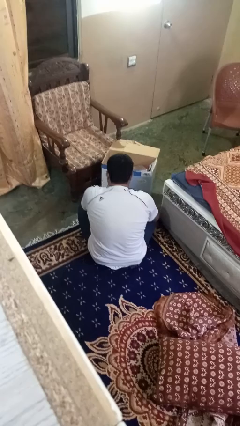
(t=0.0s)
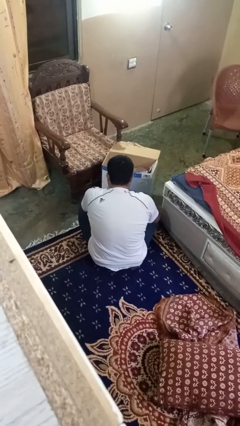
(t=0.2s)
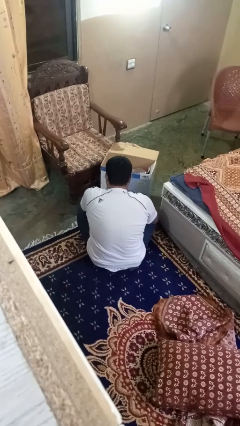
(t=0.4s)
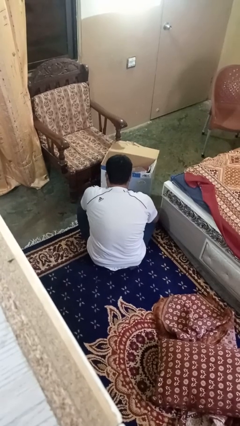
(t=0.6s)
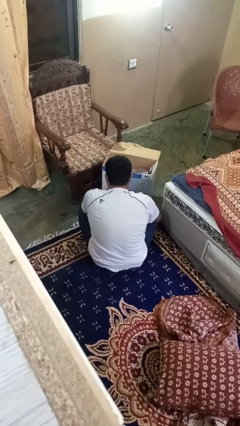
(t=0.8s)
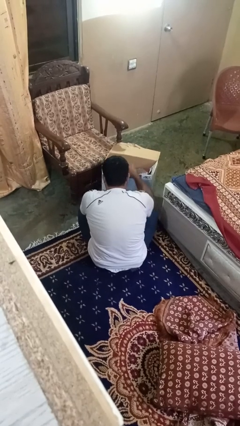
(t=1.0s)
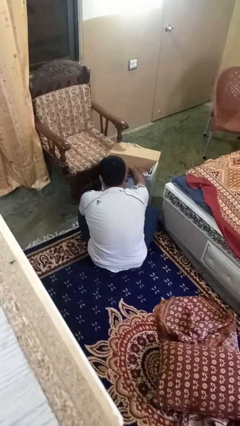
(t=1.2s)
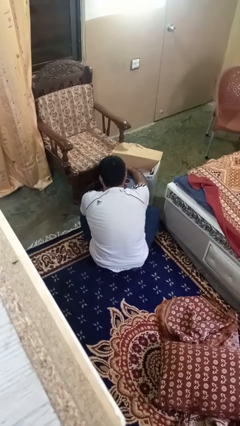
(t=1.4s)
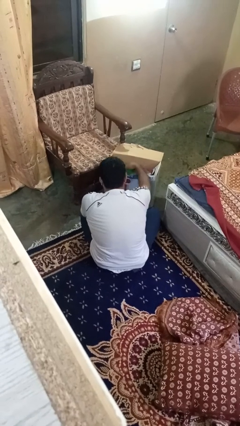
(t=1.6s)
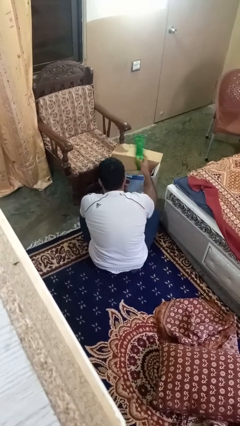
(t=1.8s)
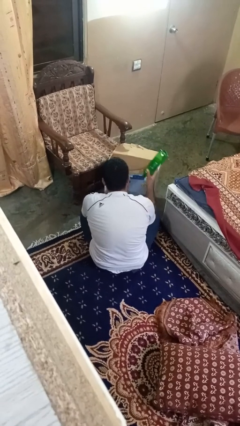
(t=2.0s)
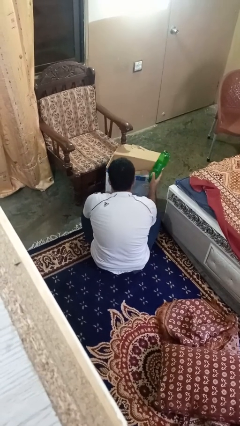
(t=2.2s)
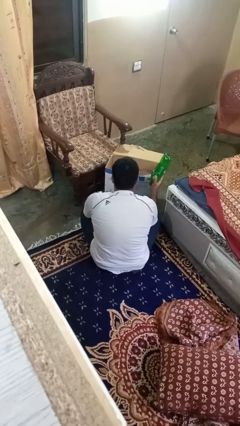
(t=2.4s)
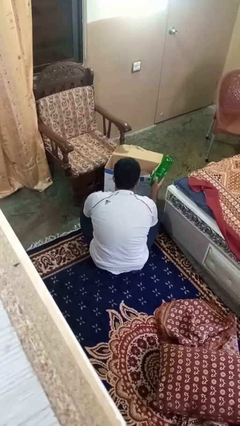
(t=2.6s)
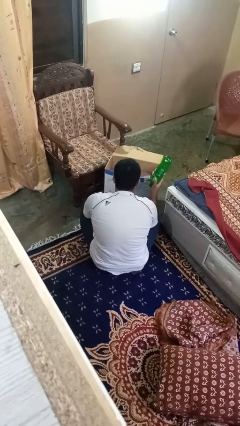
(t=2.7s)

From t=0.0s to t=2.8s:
person takes object from box

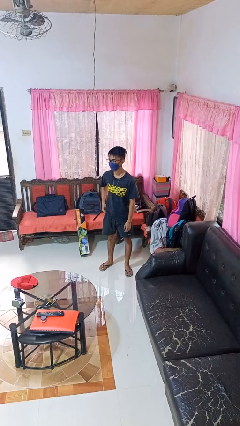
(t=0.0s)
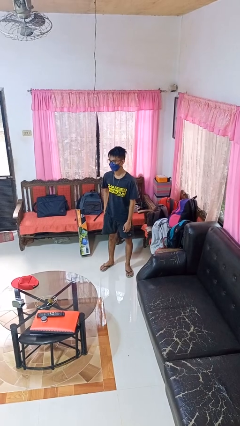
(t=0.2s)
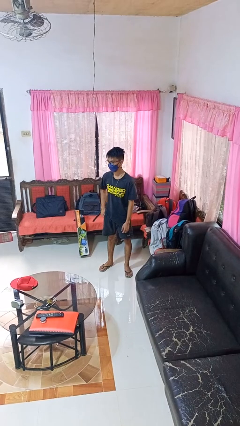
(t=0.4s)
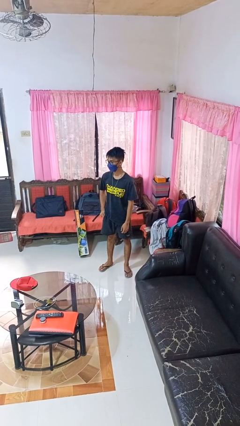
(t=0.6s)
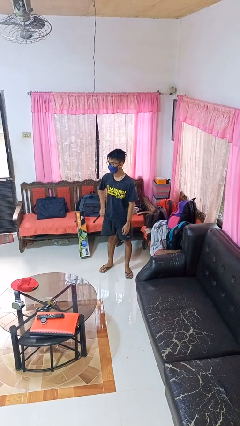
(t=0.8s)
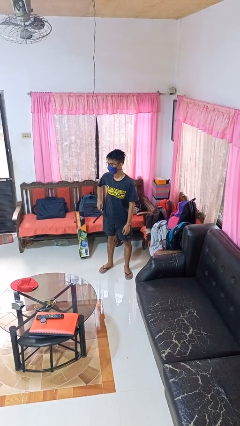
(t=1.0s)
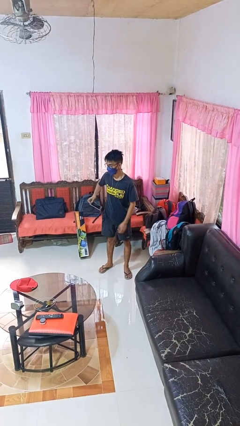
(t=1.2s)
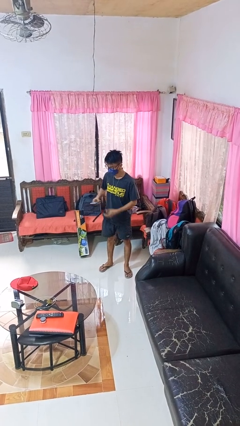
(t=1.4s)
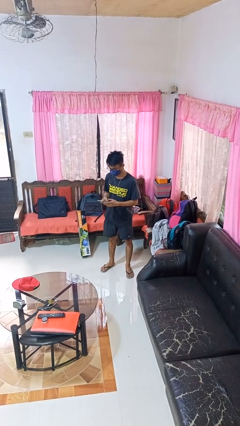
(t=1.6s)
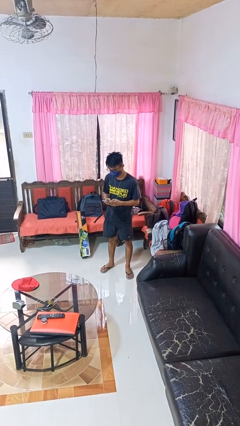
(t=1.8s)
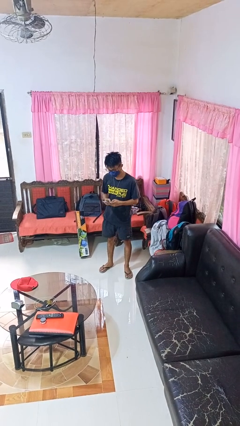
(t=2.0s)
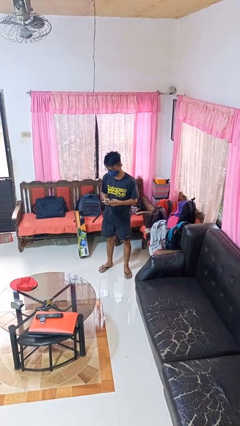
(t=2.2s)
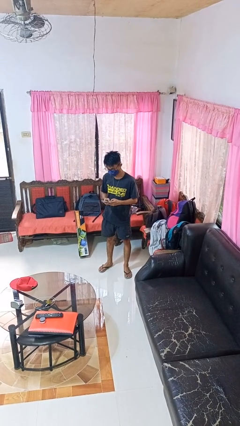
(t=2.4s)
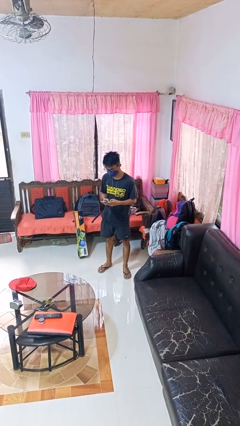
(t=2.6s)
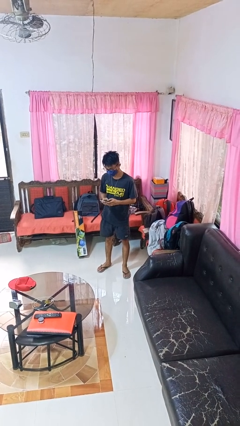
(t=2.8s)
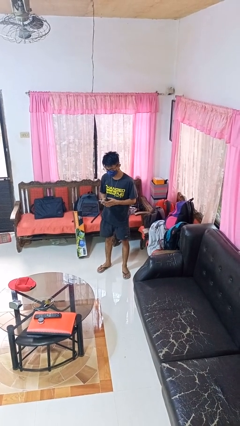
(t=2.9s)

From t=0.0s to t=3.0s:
person takes phone from pocket

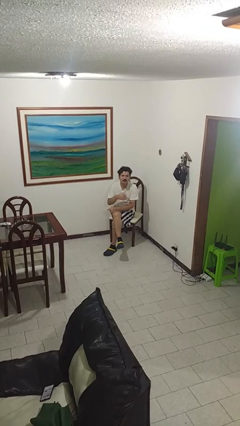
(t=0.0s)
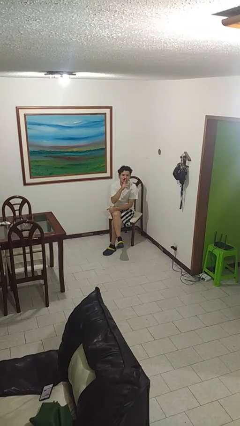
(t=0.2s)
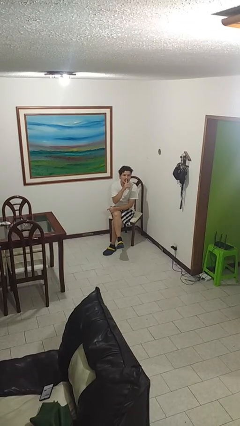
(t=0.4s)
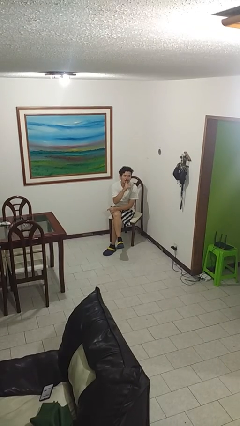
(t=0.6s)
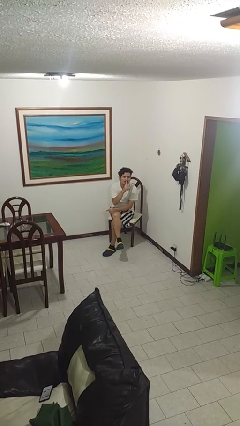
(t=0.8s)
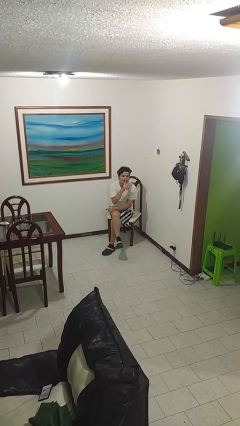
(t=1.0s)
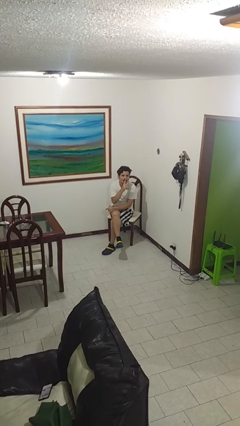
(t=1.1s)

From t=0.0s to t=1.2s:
person gestures be quiet

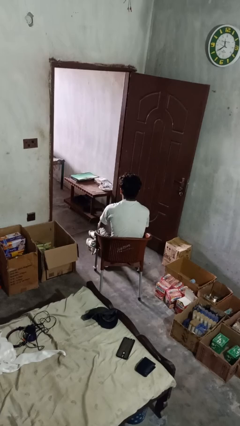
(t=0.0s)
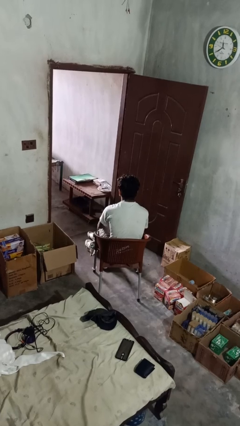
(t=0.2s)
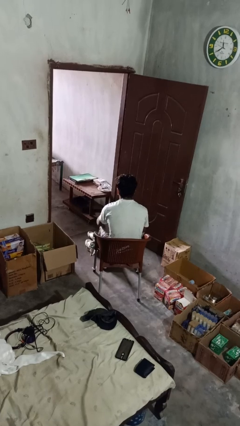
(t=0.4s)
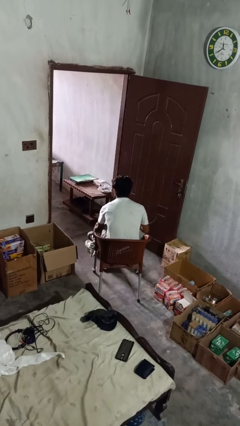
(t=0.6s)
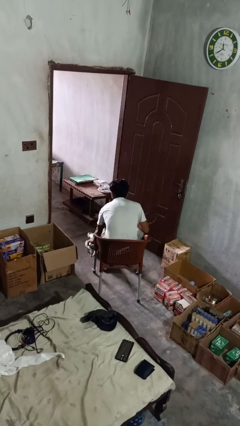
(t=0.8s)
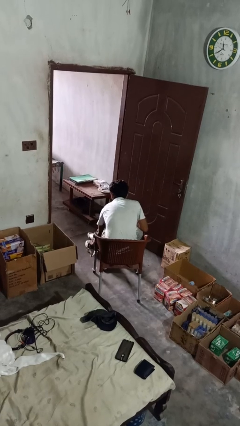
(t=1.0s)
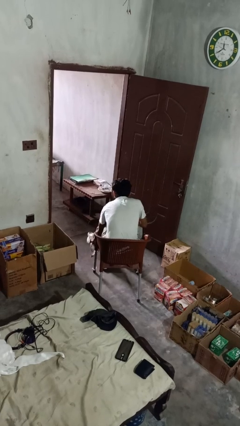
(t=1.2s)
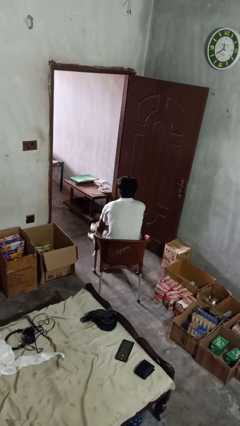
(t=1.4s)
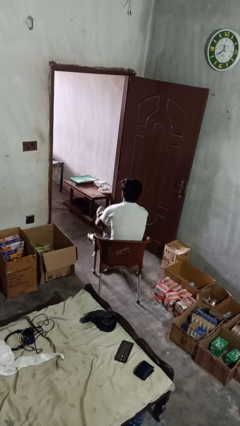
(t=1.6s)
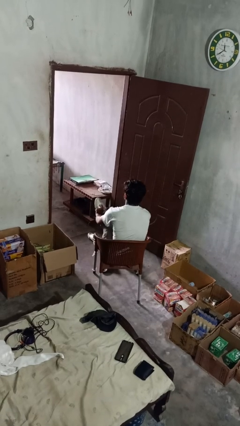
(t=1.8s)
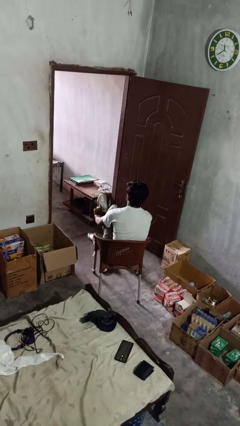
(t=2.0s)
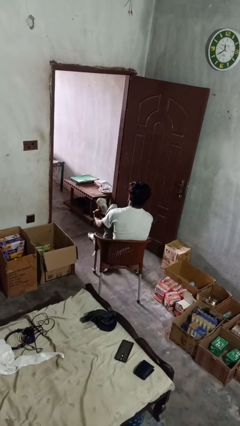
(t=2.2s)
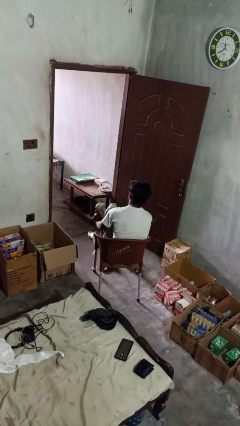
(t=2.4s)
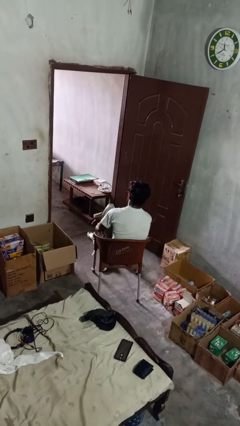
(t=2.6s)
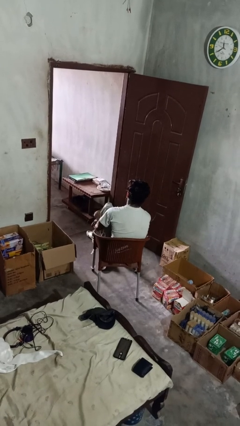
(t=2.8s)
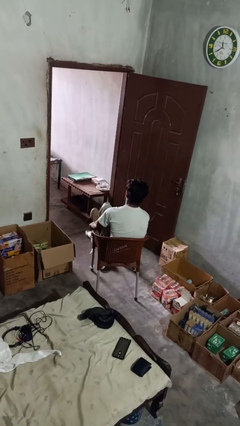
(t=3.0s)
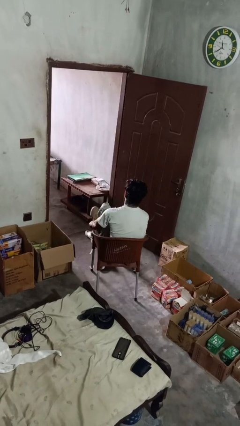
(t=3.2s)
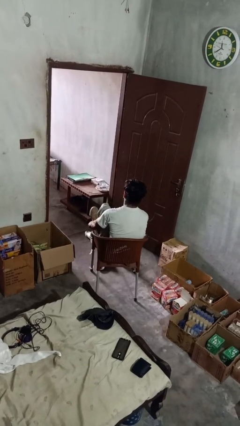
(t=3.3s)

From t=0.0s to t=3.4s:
person puts on shoes

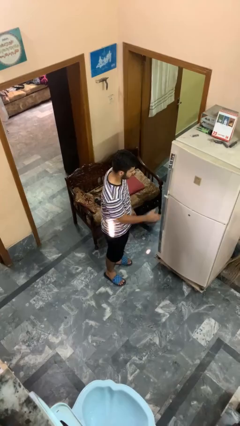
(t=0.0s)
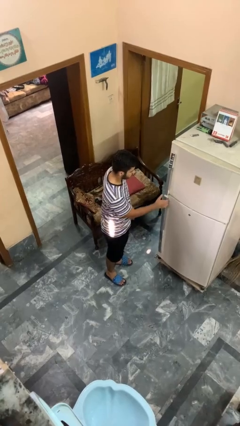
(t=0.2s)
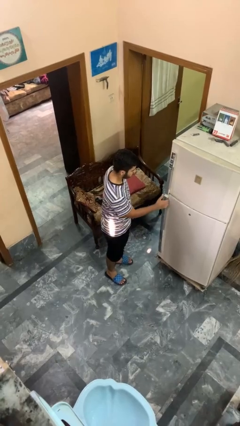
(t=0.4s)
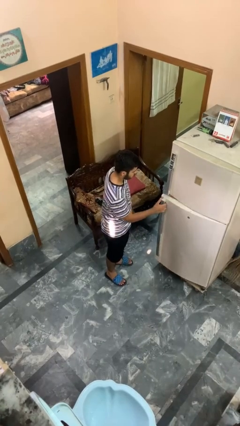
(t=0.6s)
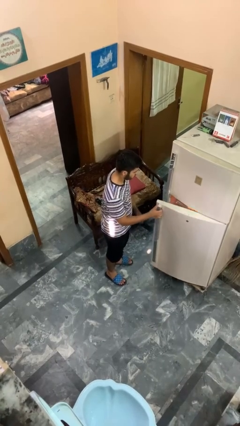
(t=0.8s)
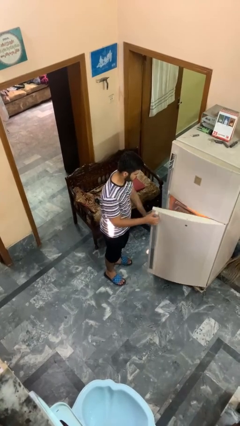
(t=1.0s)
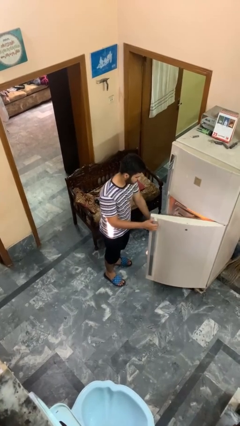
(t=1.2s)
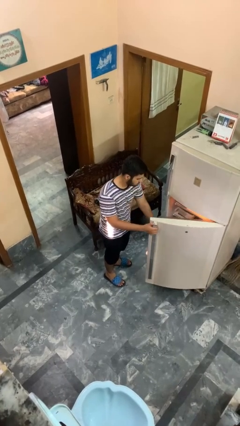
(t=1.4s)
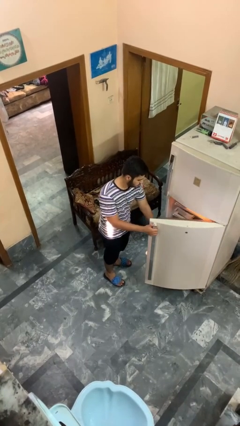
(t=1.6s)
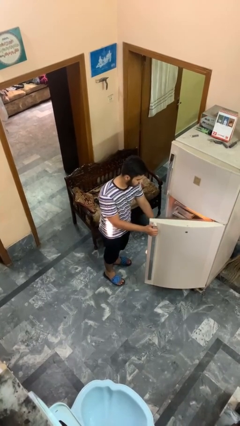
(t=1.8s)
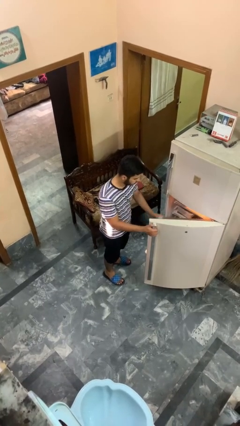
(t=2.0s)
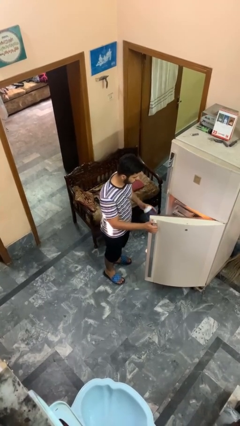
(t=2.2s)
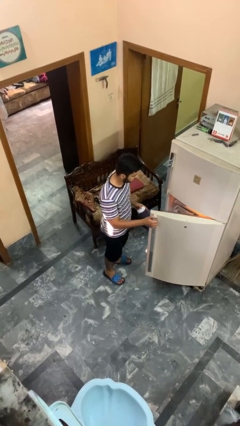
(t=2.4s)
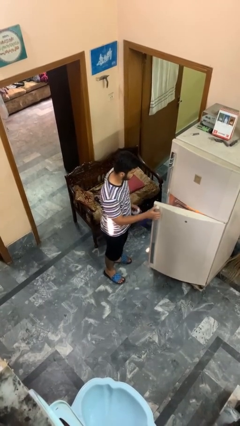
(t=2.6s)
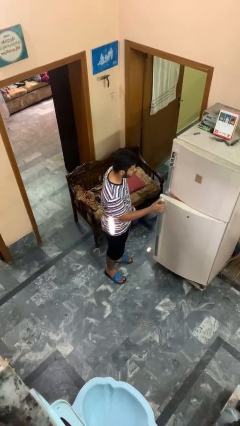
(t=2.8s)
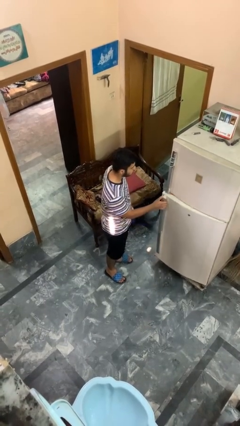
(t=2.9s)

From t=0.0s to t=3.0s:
person takes object from refrigerator

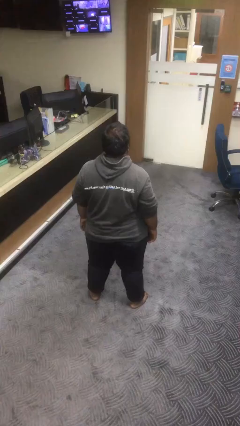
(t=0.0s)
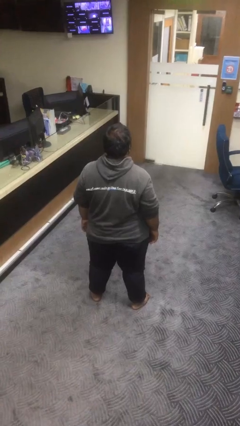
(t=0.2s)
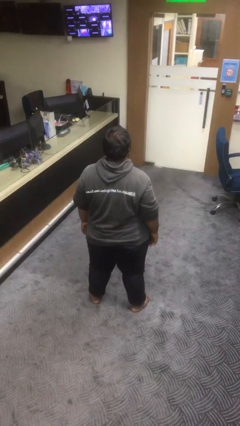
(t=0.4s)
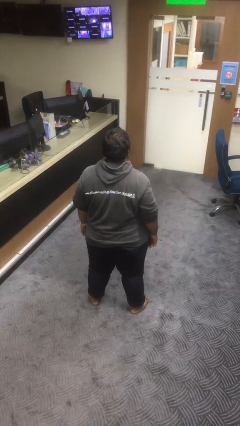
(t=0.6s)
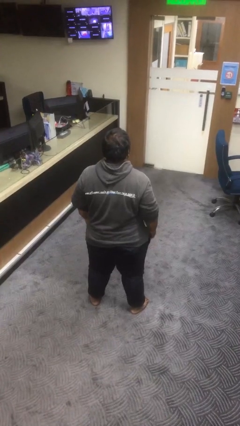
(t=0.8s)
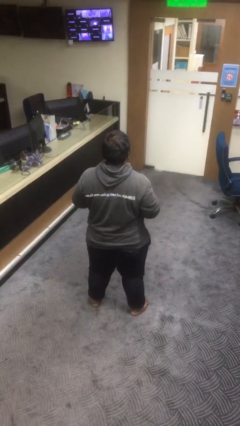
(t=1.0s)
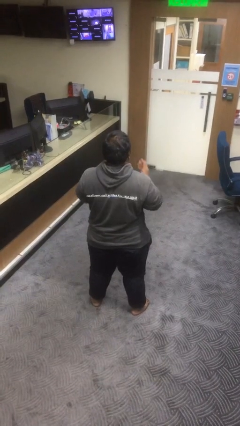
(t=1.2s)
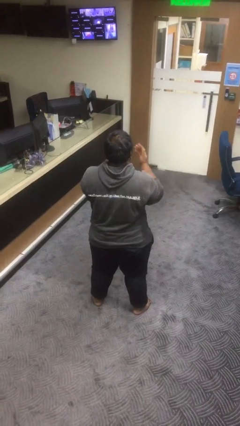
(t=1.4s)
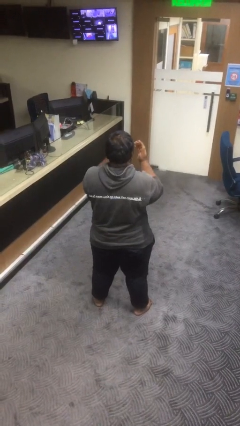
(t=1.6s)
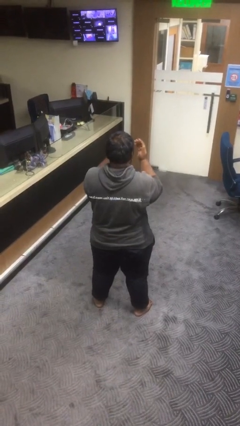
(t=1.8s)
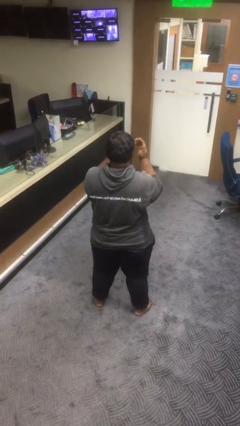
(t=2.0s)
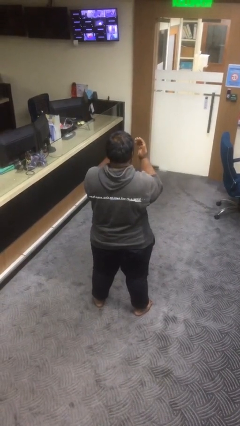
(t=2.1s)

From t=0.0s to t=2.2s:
person prays

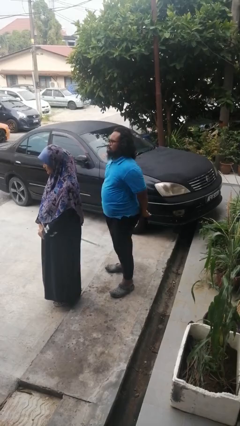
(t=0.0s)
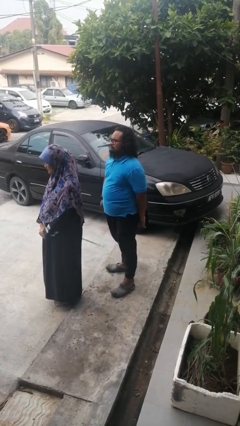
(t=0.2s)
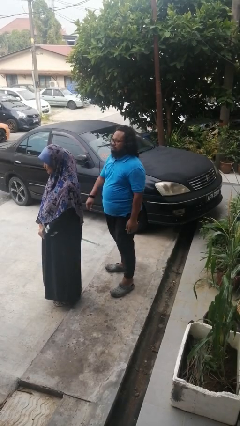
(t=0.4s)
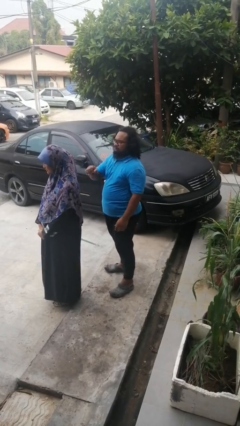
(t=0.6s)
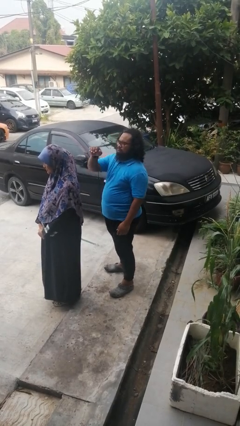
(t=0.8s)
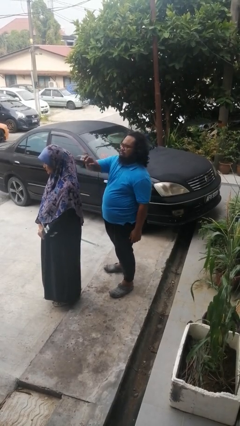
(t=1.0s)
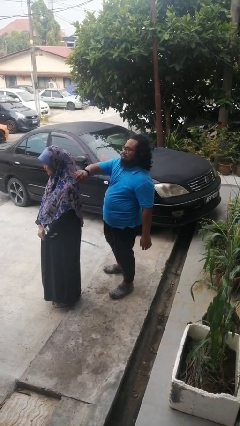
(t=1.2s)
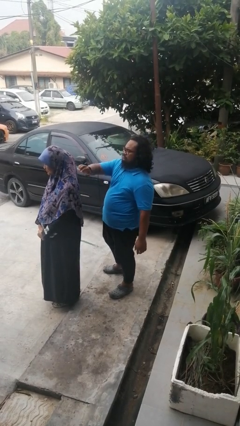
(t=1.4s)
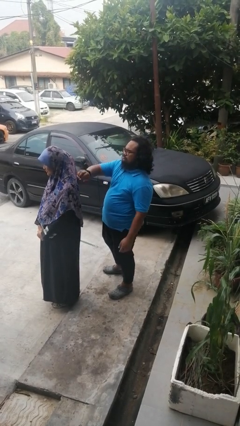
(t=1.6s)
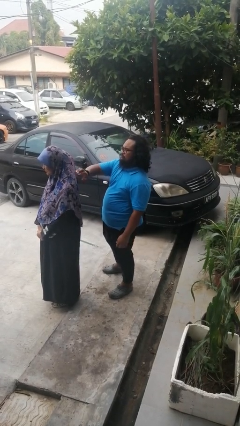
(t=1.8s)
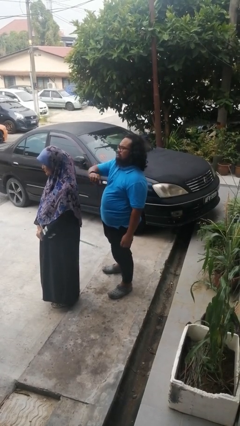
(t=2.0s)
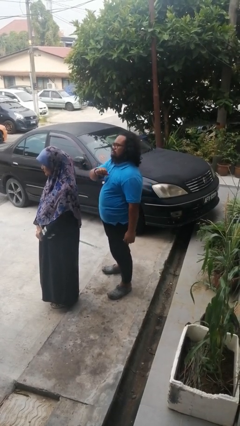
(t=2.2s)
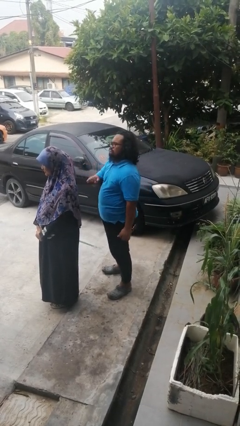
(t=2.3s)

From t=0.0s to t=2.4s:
person touches back of person
